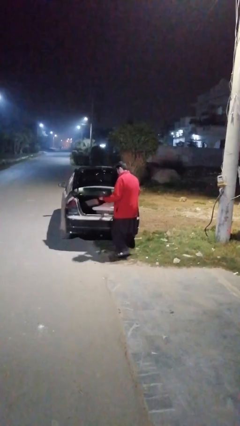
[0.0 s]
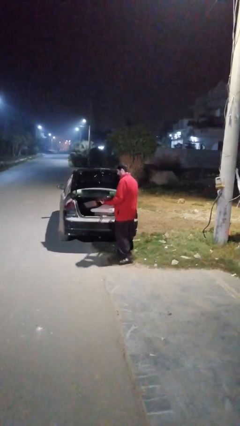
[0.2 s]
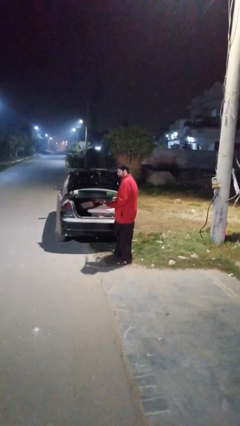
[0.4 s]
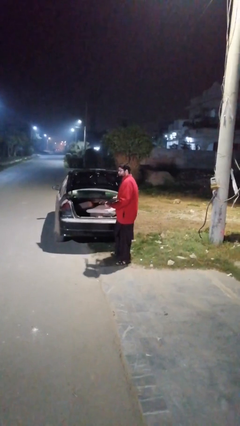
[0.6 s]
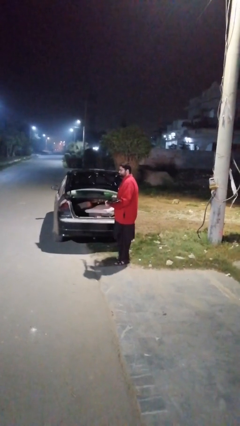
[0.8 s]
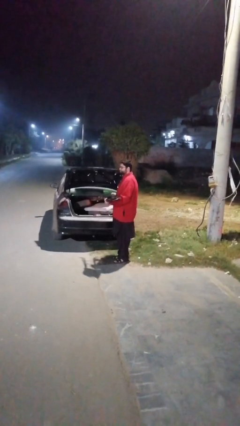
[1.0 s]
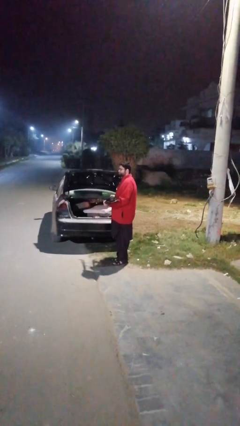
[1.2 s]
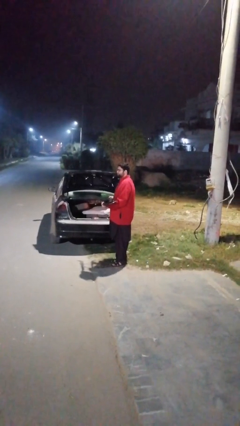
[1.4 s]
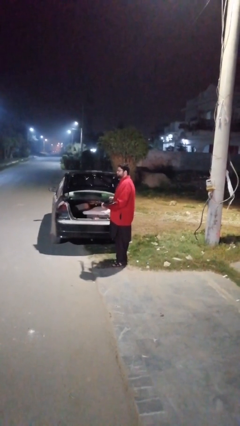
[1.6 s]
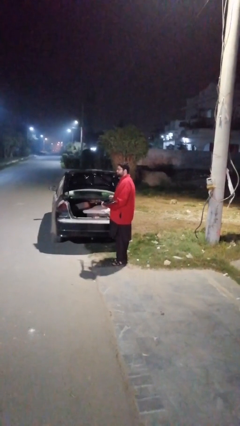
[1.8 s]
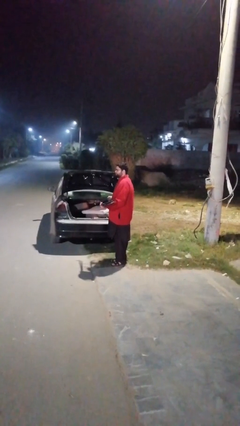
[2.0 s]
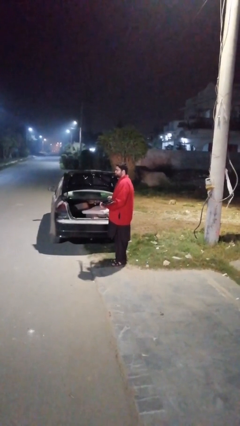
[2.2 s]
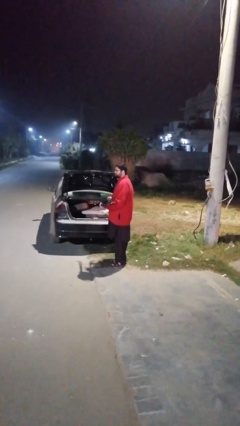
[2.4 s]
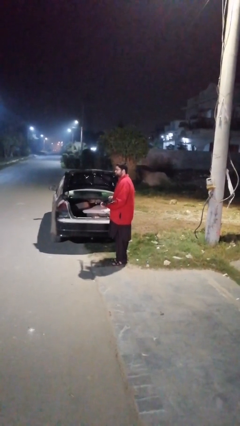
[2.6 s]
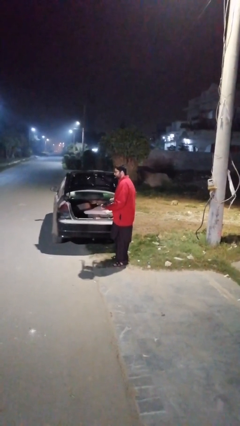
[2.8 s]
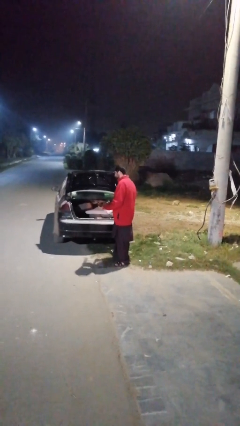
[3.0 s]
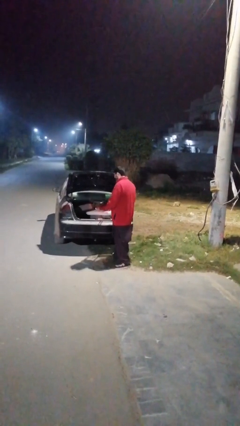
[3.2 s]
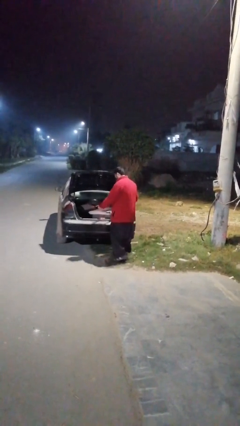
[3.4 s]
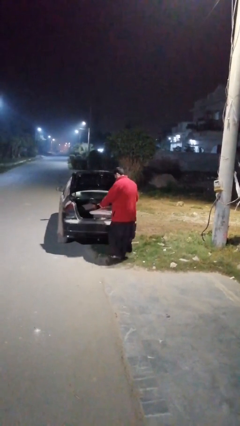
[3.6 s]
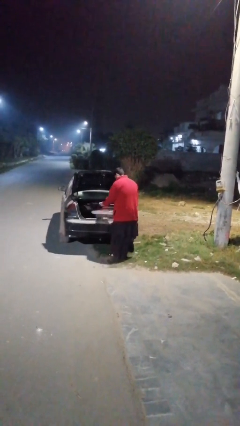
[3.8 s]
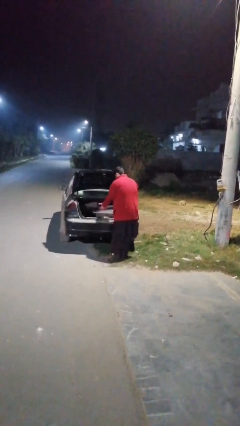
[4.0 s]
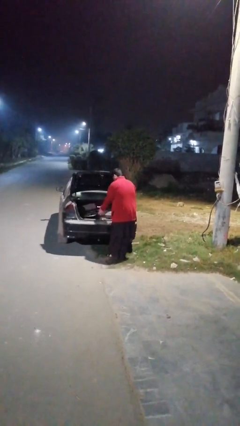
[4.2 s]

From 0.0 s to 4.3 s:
person unloads car

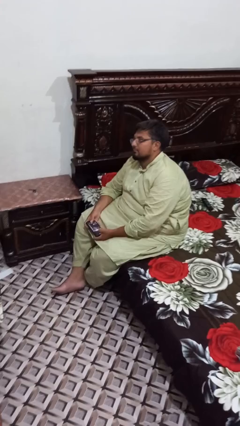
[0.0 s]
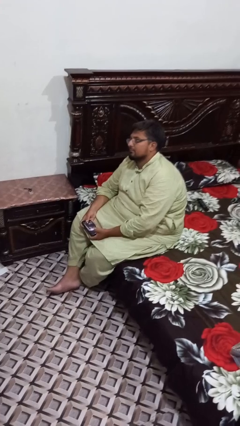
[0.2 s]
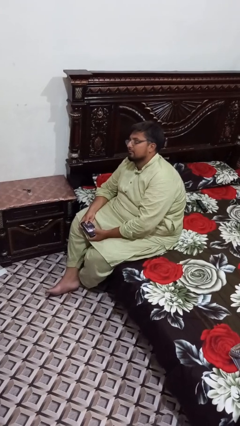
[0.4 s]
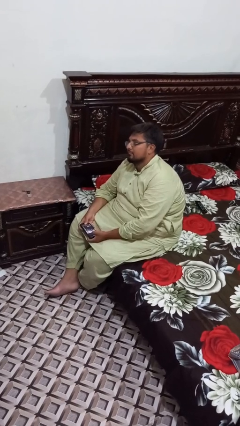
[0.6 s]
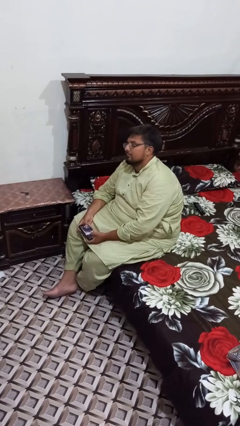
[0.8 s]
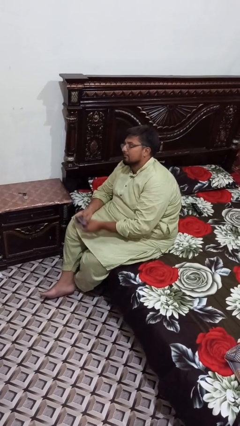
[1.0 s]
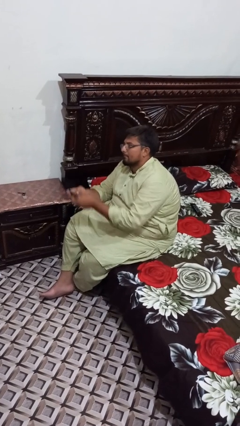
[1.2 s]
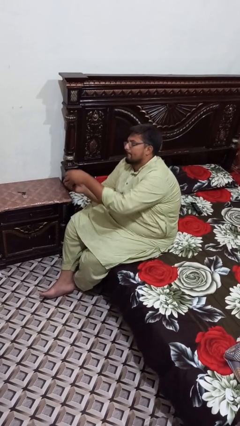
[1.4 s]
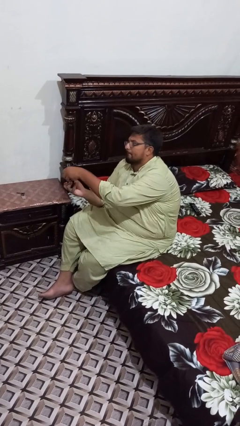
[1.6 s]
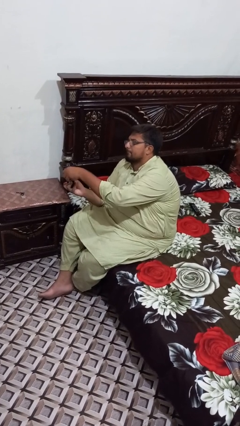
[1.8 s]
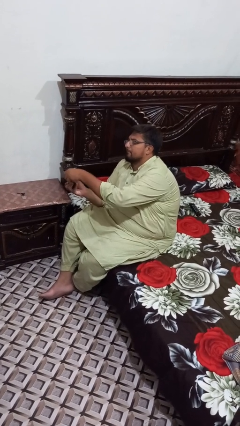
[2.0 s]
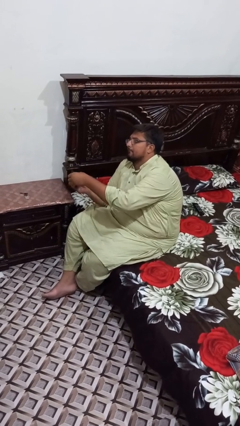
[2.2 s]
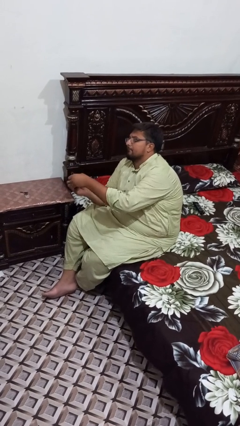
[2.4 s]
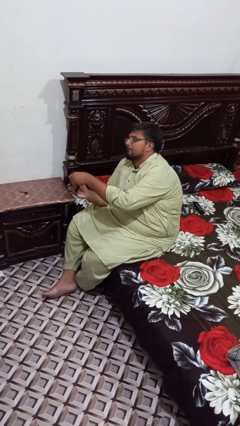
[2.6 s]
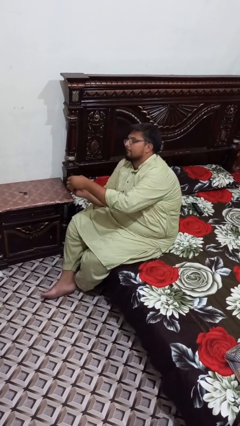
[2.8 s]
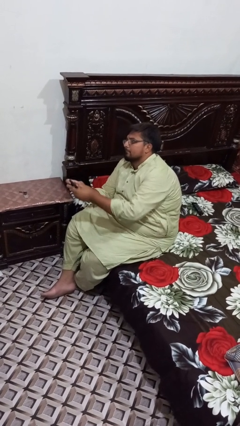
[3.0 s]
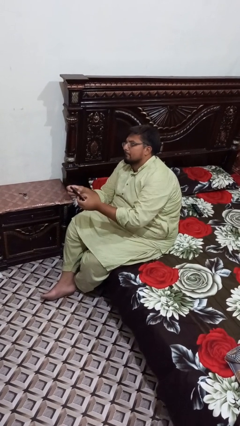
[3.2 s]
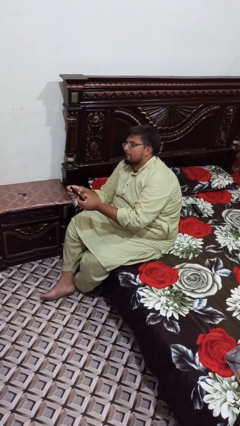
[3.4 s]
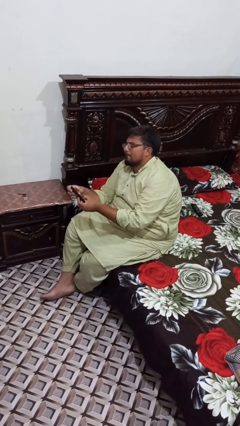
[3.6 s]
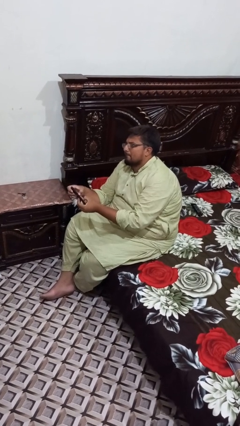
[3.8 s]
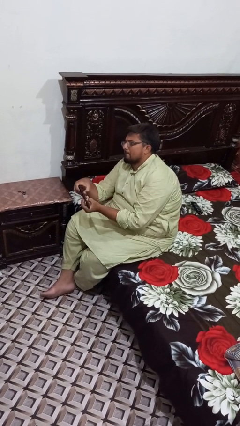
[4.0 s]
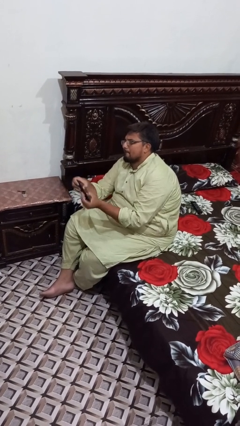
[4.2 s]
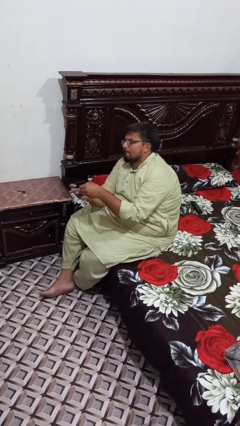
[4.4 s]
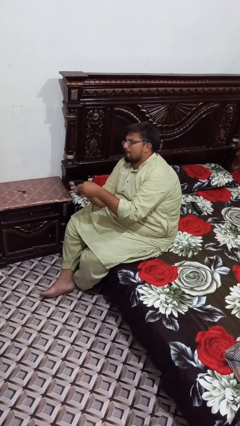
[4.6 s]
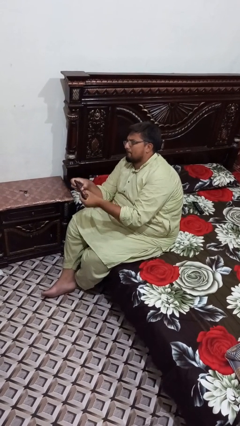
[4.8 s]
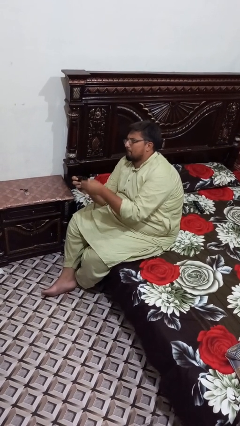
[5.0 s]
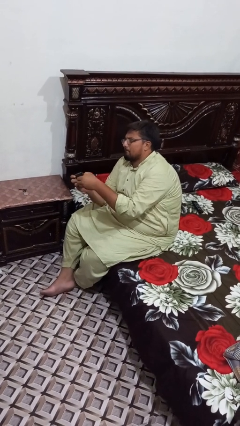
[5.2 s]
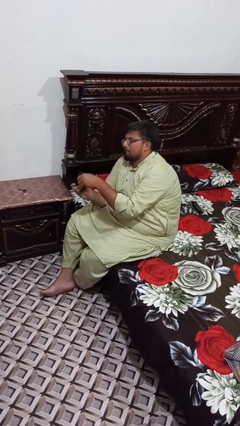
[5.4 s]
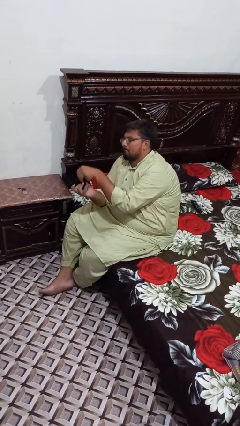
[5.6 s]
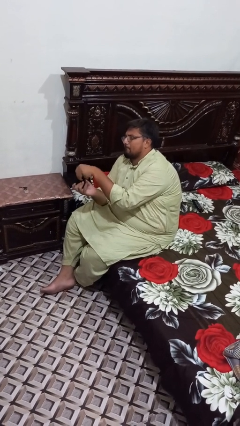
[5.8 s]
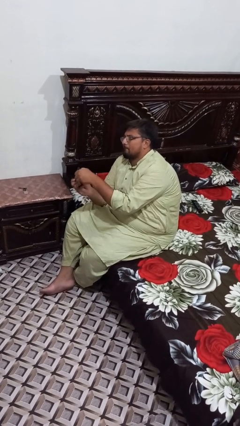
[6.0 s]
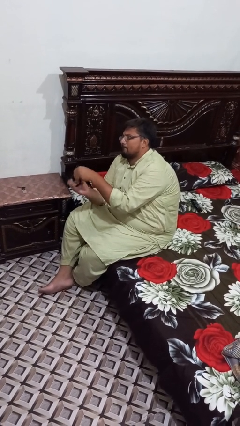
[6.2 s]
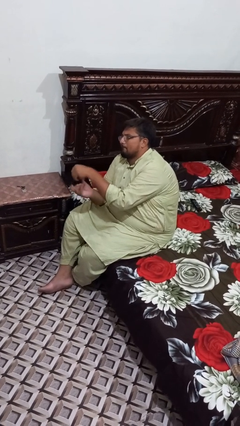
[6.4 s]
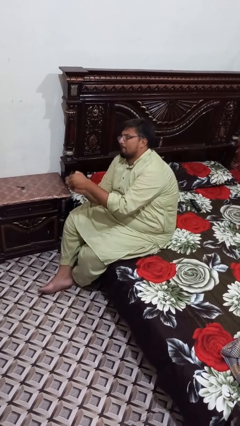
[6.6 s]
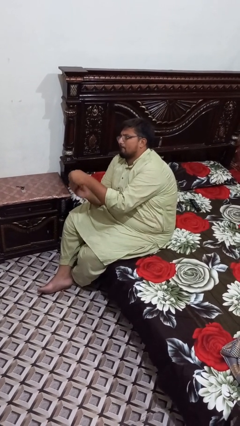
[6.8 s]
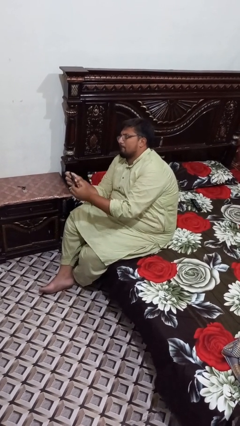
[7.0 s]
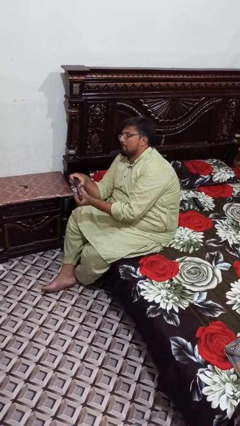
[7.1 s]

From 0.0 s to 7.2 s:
person interacts with handheld game

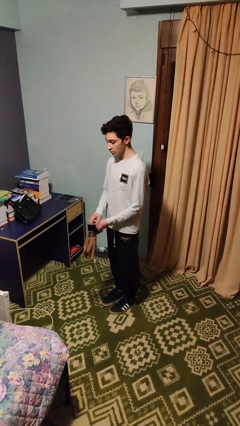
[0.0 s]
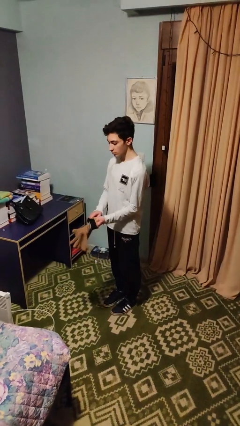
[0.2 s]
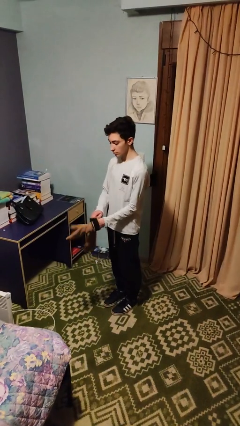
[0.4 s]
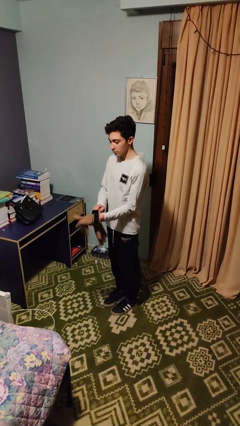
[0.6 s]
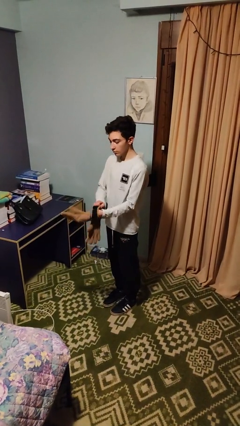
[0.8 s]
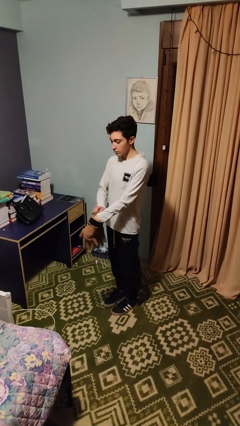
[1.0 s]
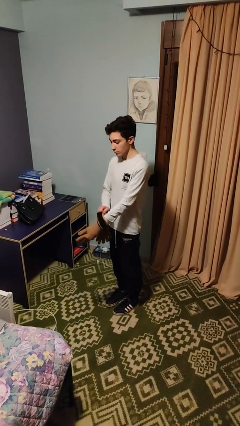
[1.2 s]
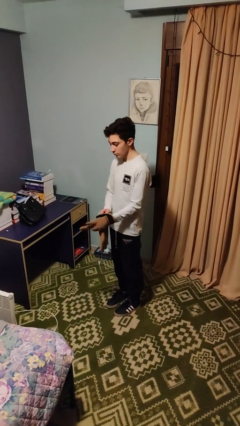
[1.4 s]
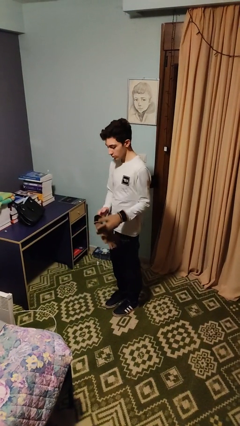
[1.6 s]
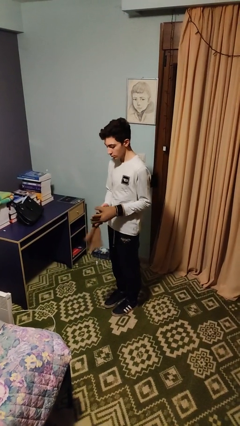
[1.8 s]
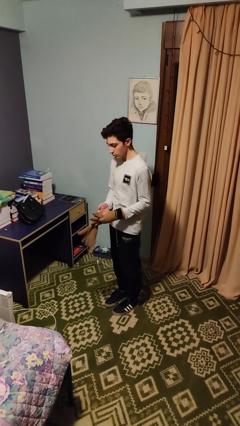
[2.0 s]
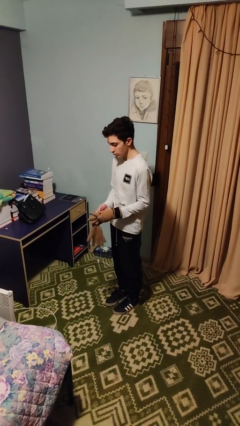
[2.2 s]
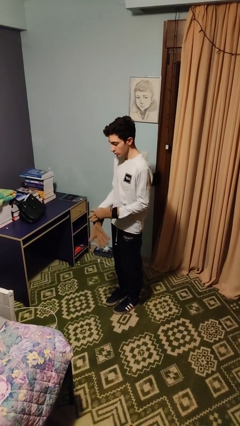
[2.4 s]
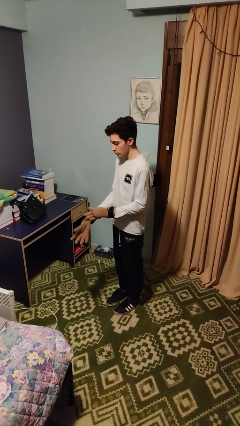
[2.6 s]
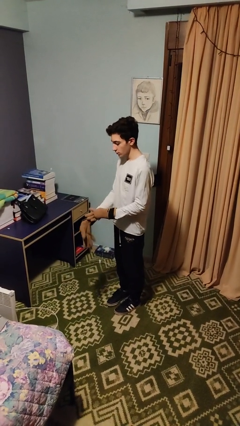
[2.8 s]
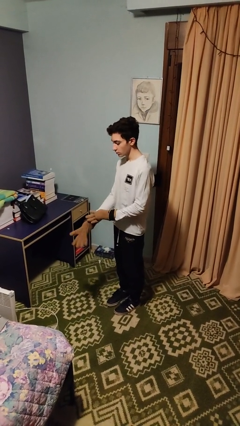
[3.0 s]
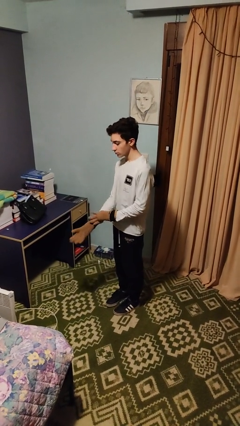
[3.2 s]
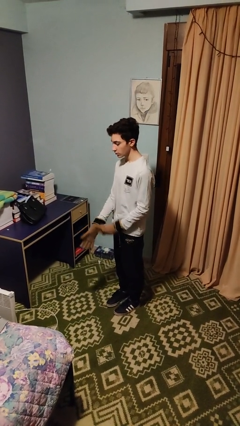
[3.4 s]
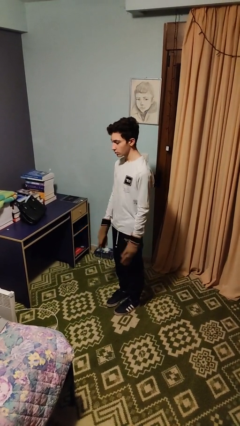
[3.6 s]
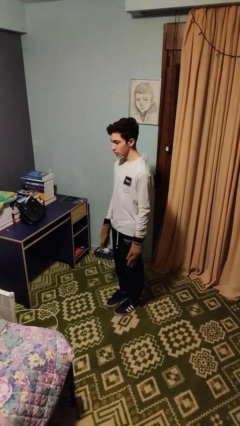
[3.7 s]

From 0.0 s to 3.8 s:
person puts on gloves

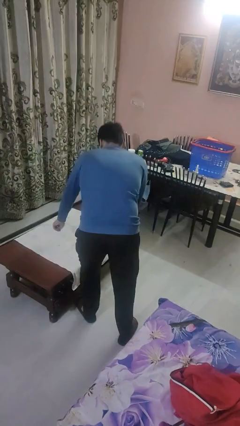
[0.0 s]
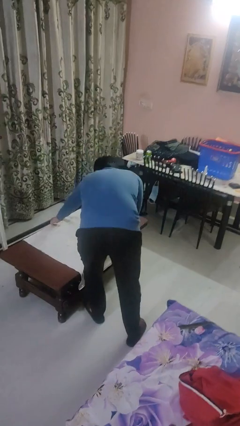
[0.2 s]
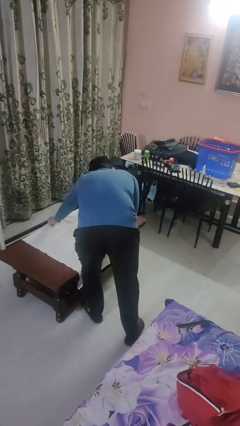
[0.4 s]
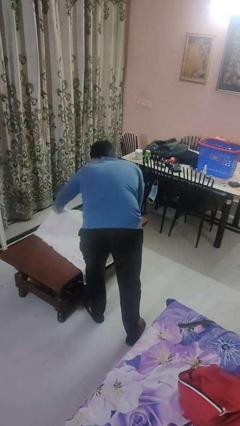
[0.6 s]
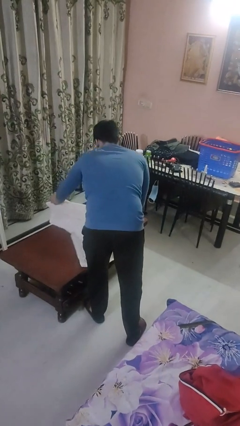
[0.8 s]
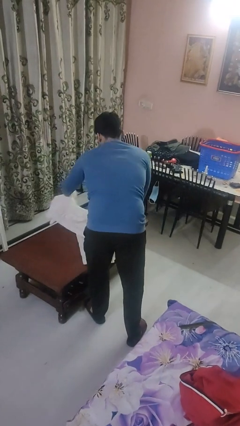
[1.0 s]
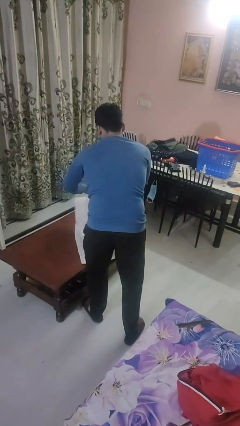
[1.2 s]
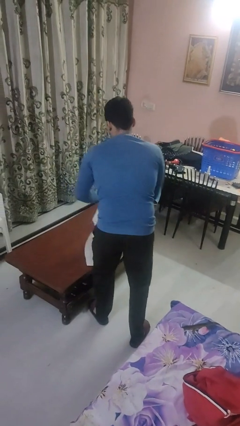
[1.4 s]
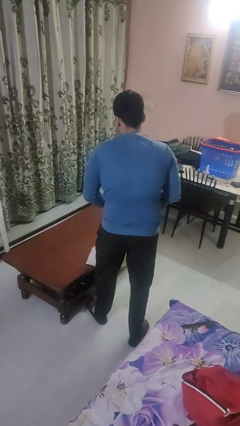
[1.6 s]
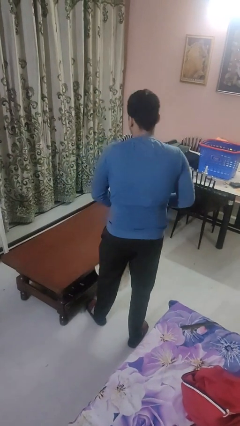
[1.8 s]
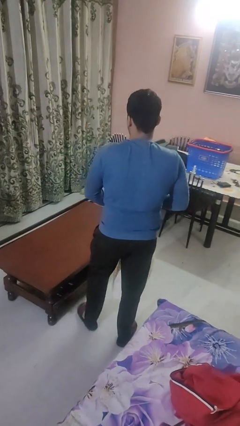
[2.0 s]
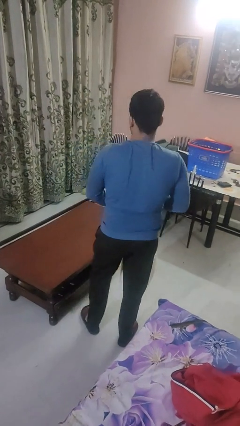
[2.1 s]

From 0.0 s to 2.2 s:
person folds tablecloth

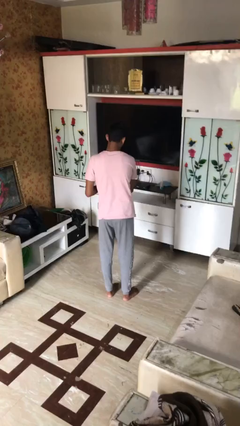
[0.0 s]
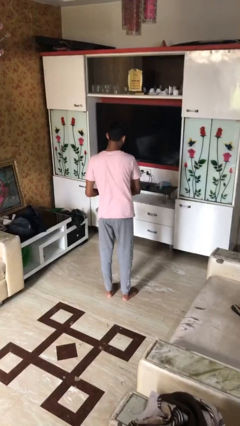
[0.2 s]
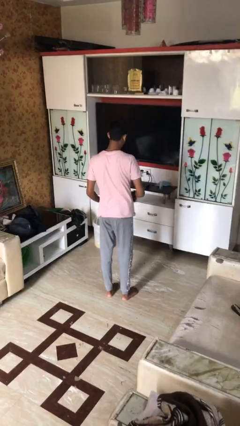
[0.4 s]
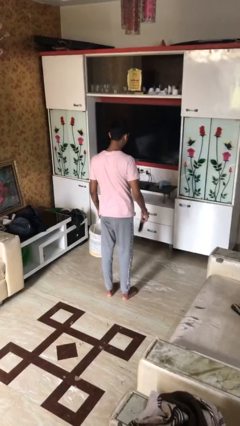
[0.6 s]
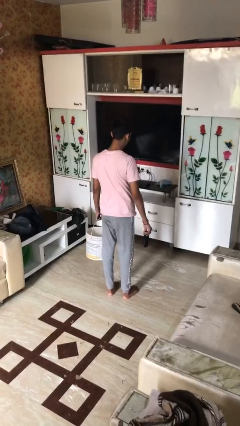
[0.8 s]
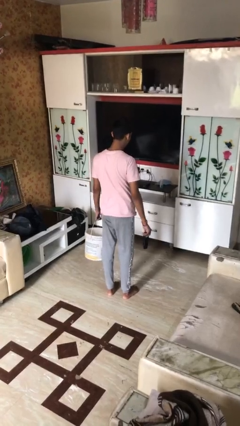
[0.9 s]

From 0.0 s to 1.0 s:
person takes object from basket
